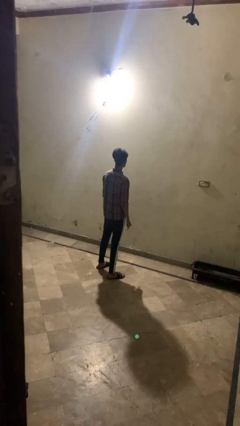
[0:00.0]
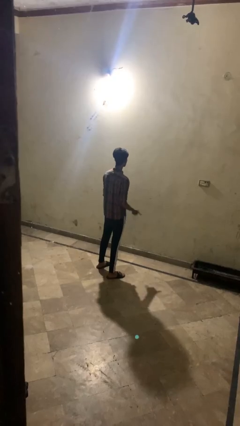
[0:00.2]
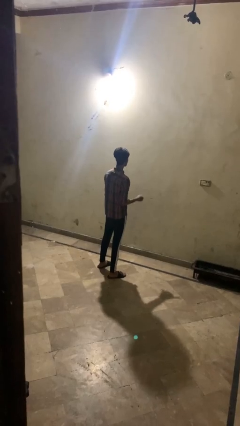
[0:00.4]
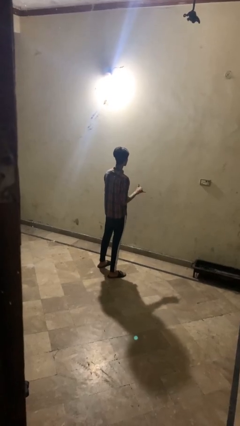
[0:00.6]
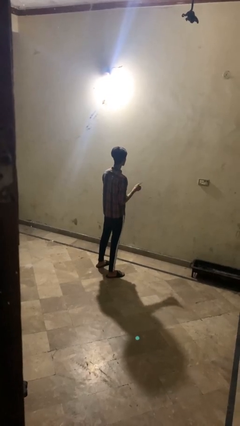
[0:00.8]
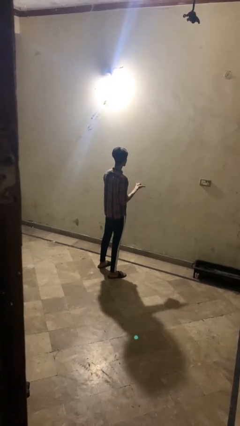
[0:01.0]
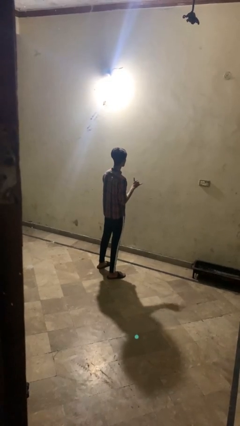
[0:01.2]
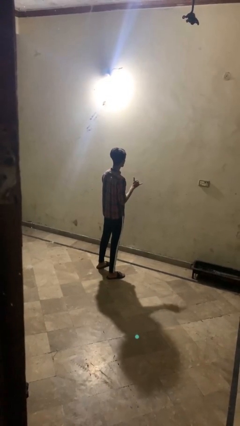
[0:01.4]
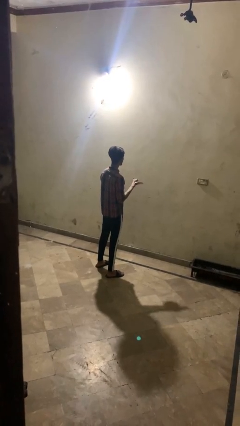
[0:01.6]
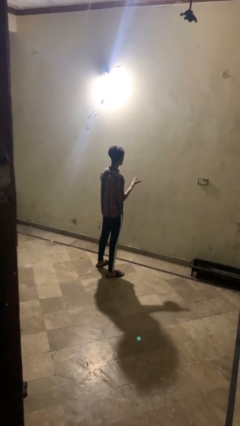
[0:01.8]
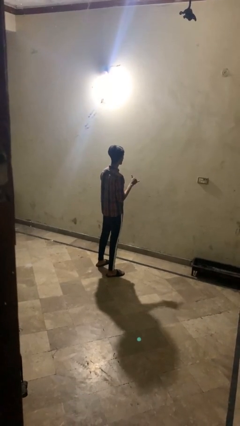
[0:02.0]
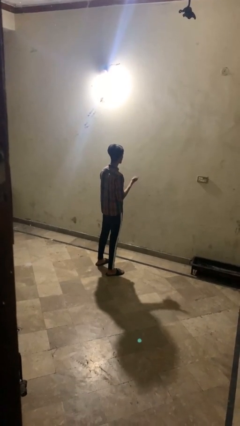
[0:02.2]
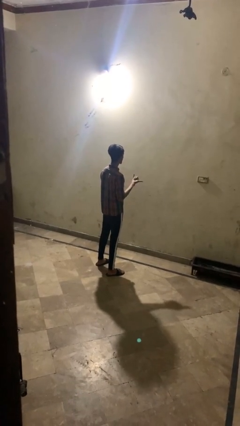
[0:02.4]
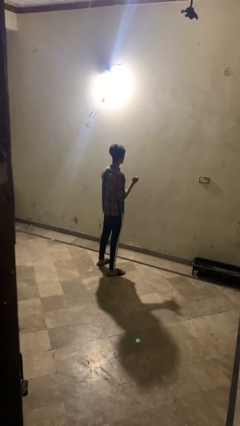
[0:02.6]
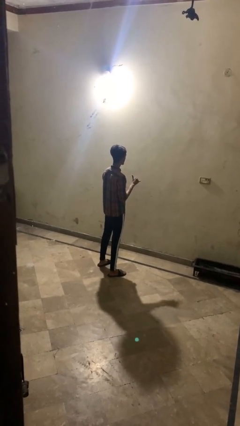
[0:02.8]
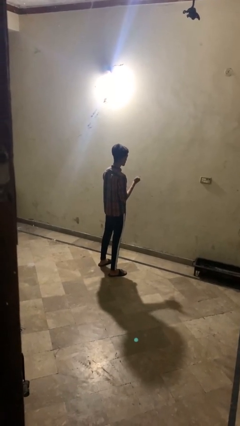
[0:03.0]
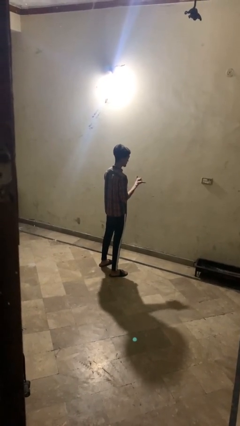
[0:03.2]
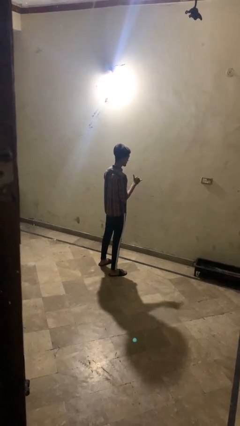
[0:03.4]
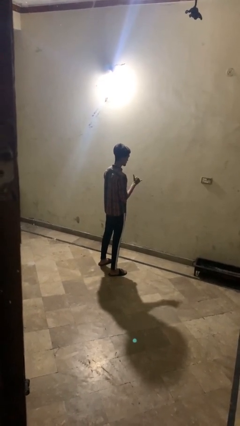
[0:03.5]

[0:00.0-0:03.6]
person gestures hang loose

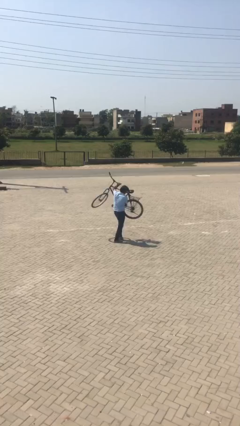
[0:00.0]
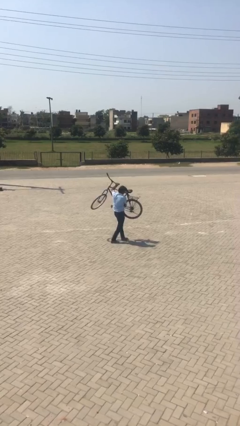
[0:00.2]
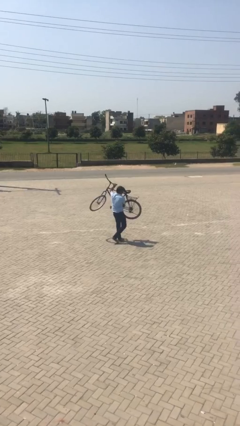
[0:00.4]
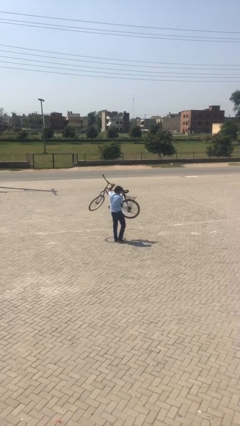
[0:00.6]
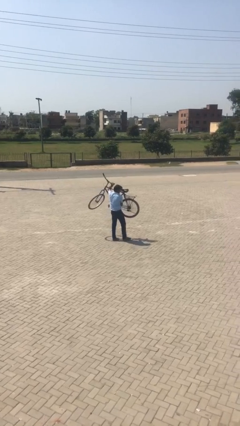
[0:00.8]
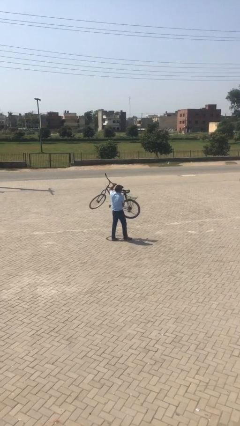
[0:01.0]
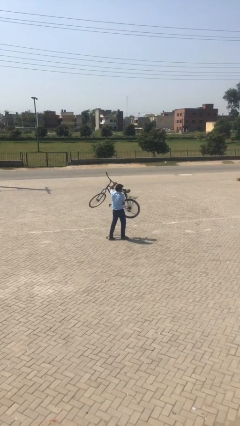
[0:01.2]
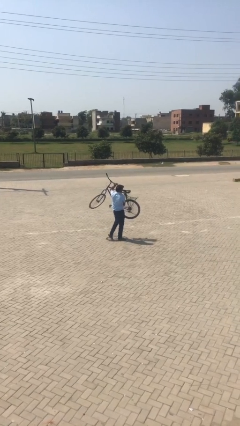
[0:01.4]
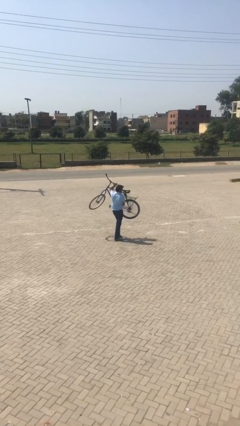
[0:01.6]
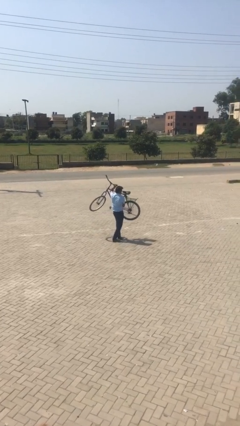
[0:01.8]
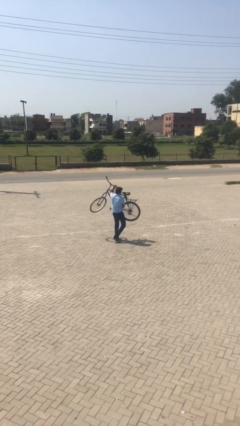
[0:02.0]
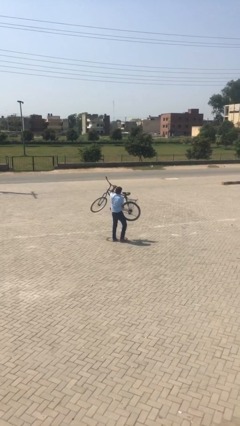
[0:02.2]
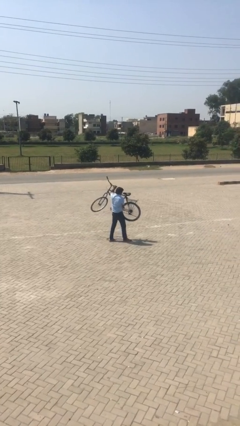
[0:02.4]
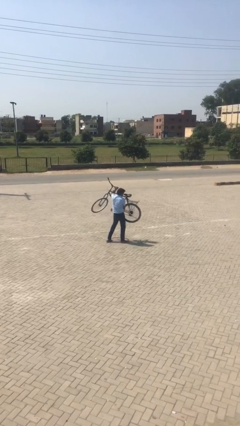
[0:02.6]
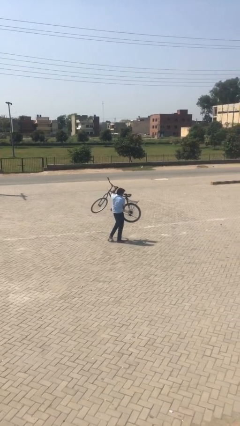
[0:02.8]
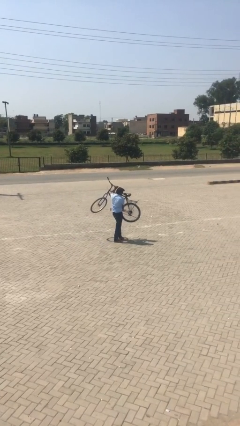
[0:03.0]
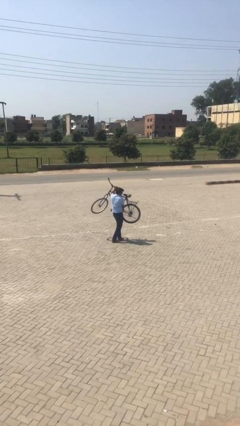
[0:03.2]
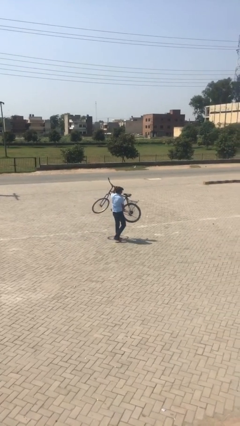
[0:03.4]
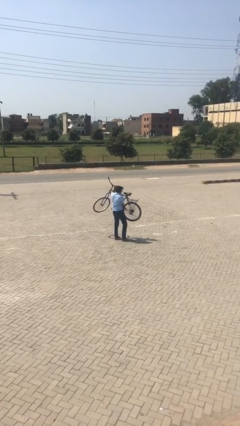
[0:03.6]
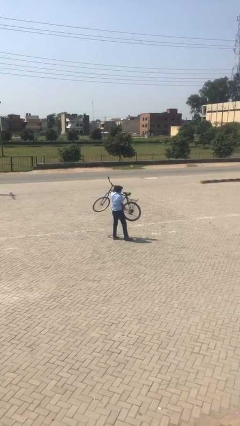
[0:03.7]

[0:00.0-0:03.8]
person carries heavy object

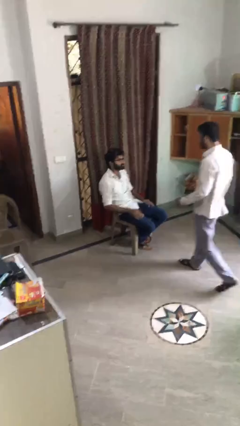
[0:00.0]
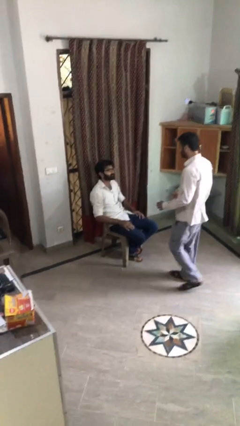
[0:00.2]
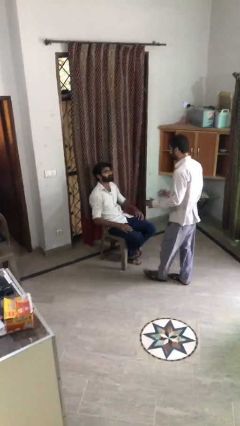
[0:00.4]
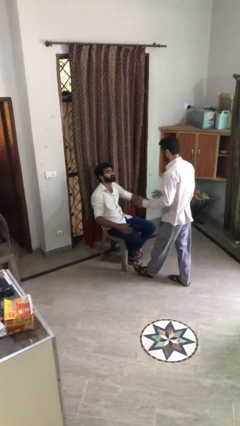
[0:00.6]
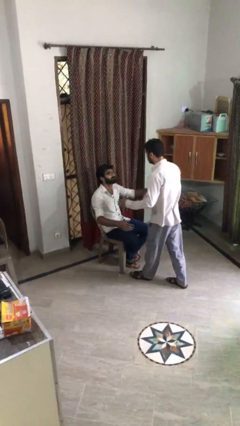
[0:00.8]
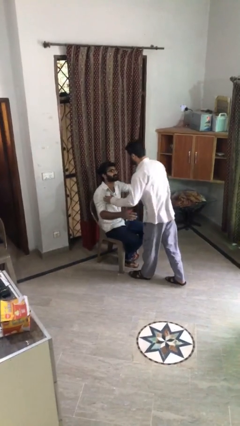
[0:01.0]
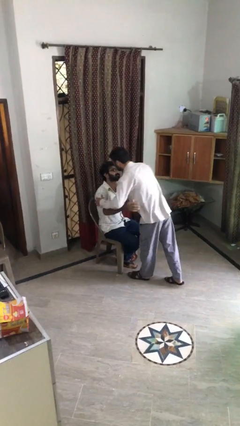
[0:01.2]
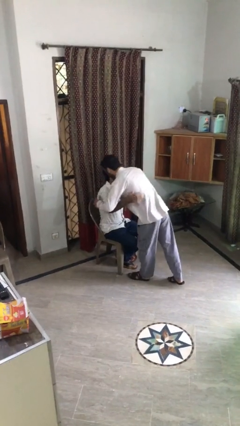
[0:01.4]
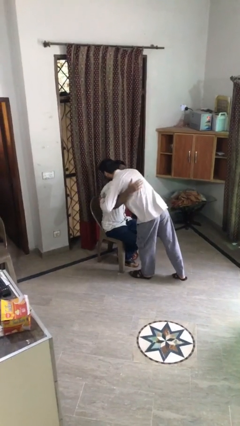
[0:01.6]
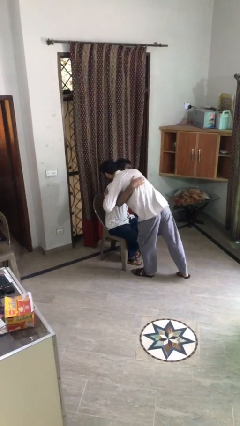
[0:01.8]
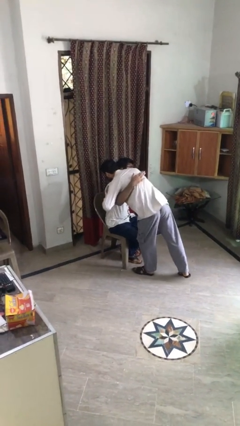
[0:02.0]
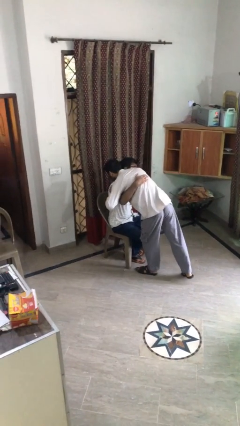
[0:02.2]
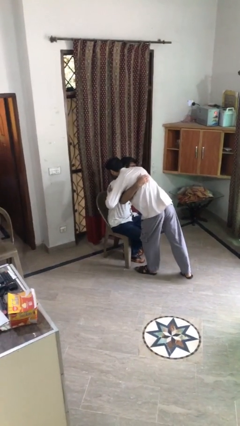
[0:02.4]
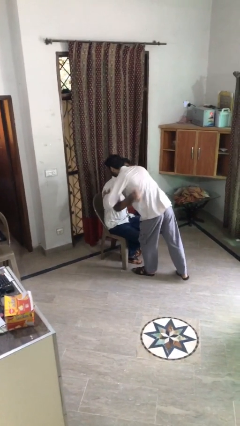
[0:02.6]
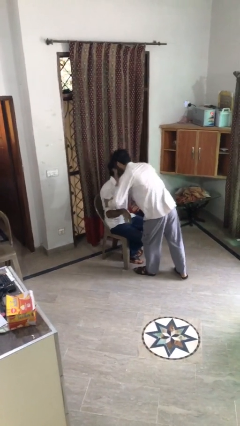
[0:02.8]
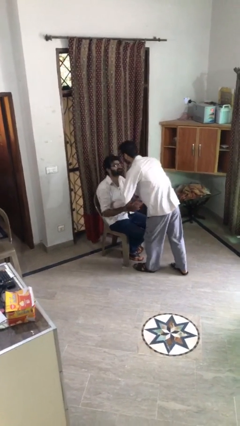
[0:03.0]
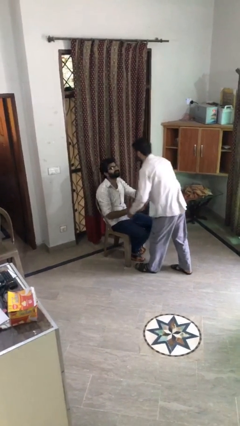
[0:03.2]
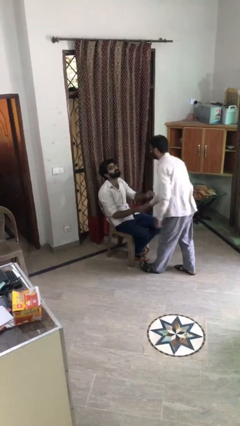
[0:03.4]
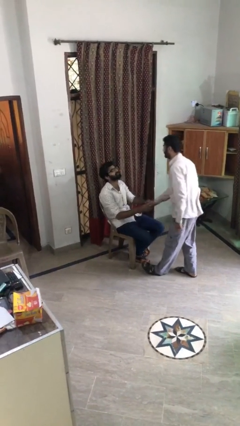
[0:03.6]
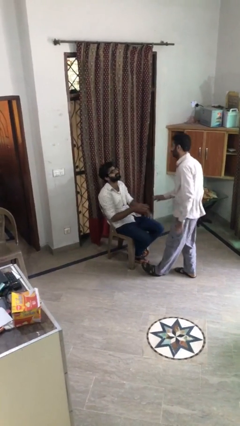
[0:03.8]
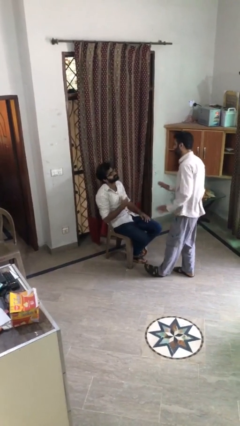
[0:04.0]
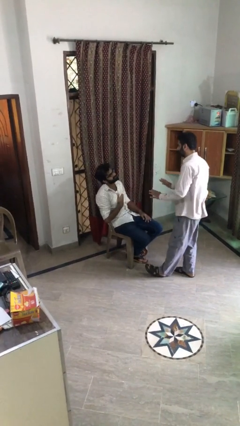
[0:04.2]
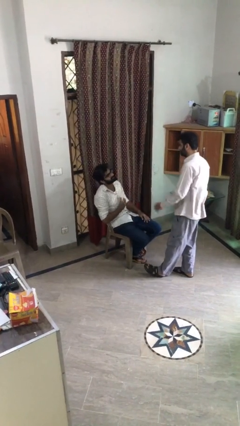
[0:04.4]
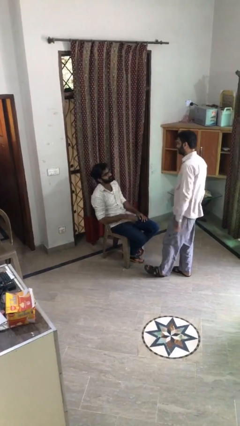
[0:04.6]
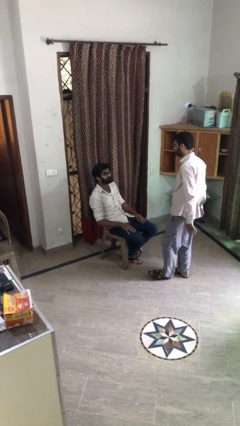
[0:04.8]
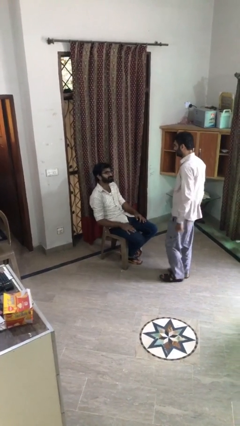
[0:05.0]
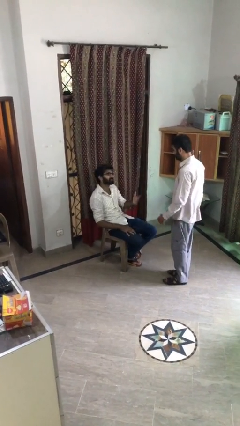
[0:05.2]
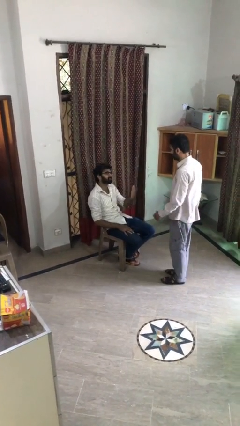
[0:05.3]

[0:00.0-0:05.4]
person embraces person

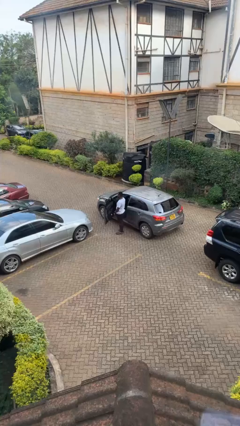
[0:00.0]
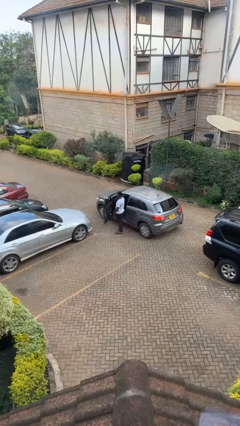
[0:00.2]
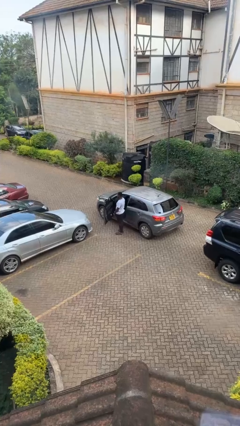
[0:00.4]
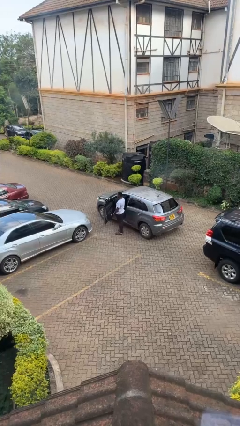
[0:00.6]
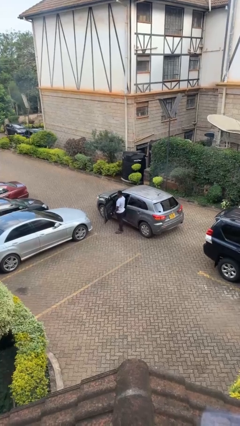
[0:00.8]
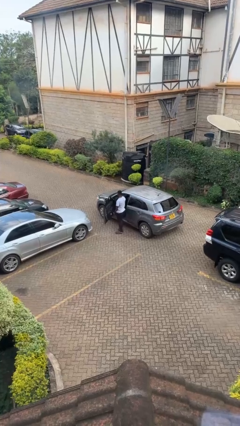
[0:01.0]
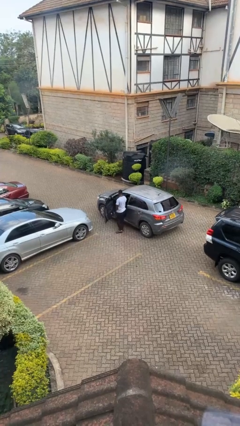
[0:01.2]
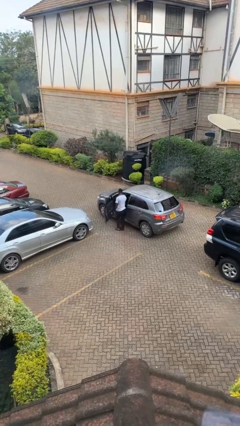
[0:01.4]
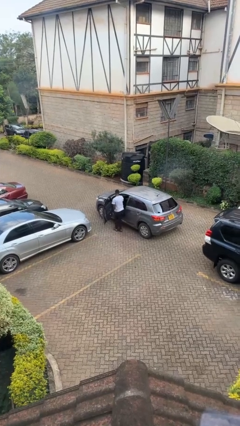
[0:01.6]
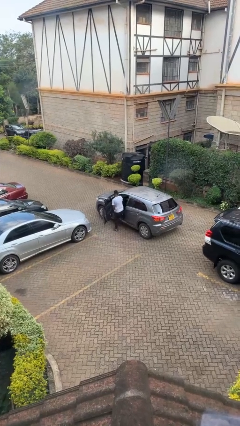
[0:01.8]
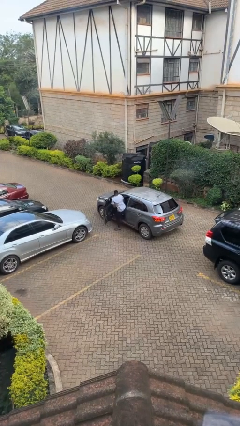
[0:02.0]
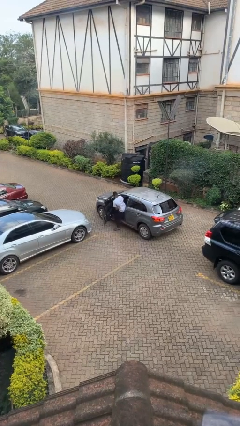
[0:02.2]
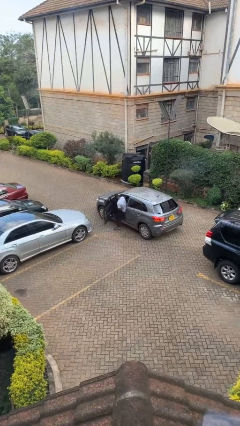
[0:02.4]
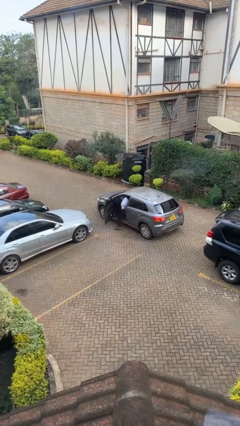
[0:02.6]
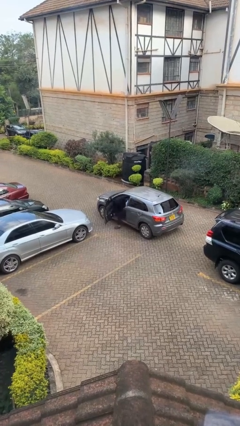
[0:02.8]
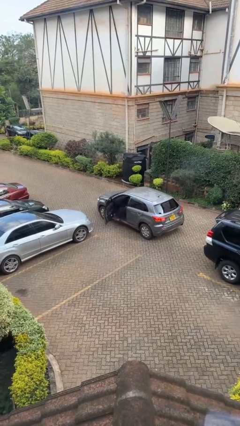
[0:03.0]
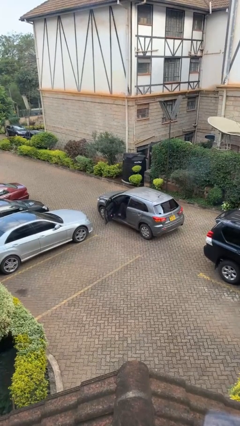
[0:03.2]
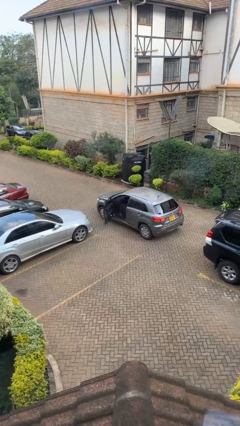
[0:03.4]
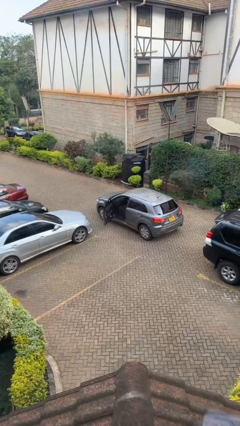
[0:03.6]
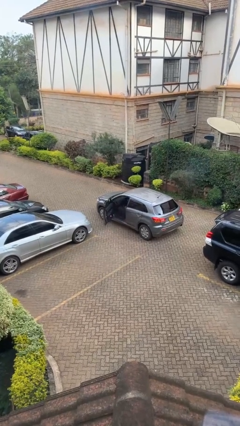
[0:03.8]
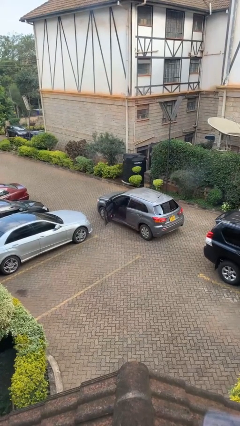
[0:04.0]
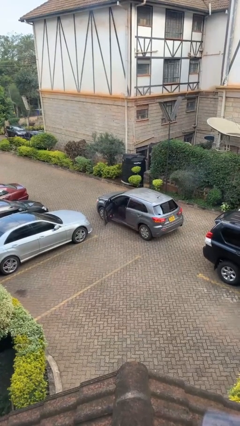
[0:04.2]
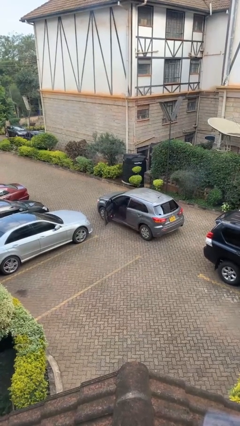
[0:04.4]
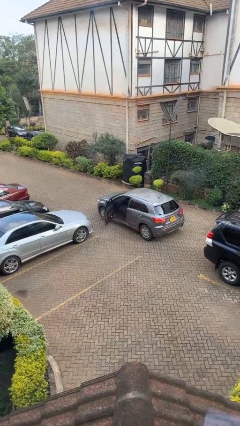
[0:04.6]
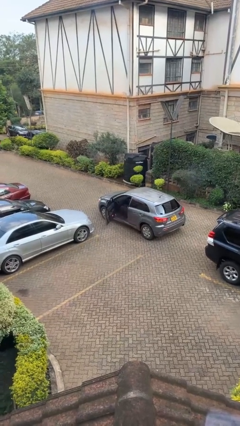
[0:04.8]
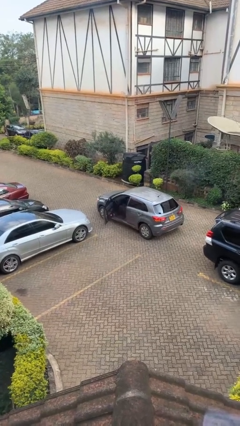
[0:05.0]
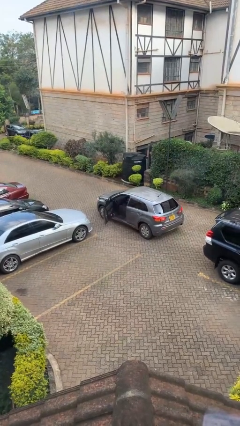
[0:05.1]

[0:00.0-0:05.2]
person enters car
